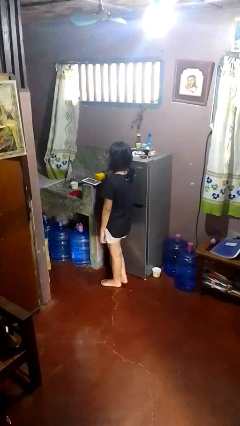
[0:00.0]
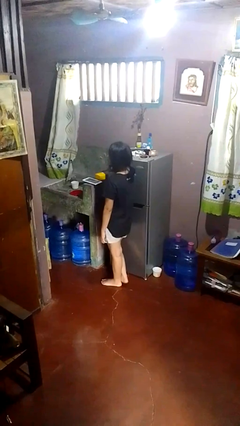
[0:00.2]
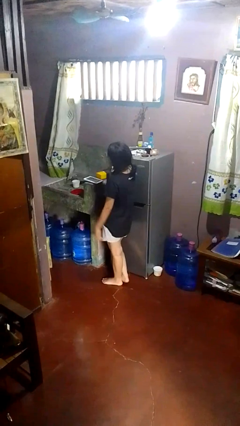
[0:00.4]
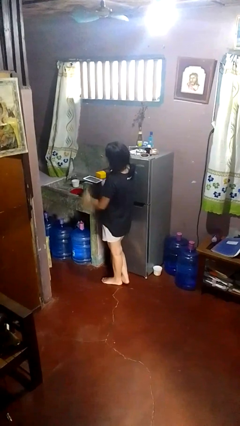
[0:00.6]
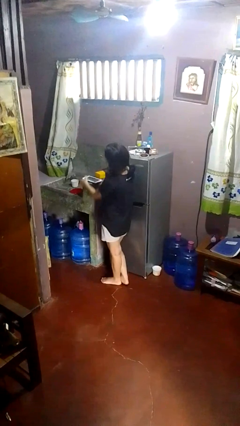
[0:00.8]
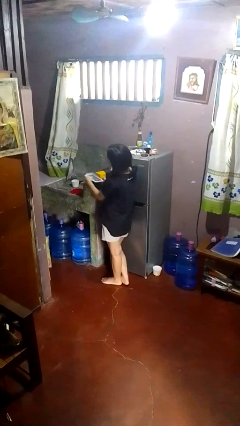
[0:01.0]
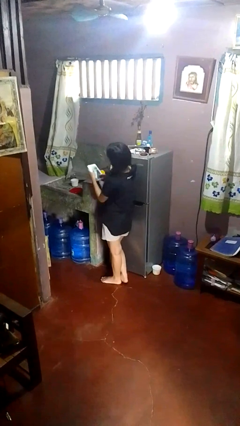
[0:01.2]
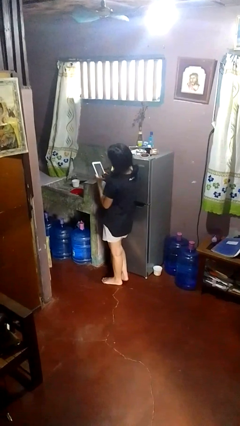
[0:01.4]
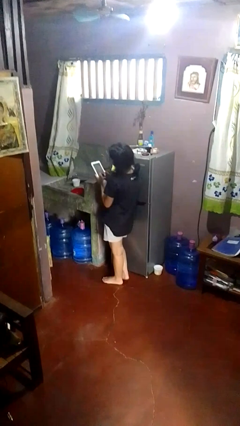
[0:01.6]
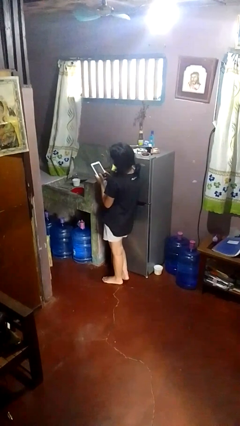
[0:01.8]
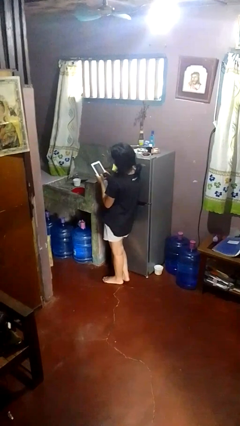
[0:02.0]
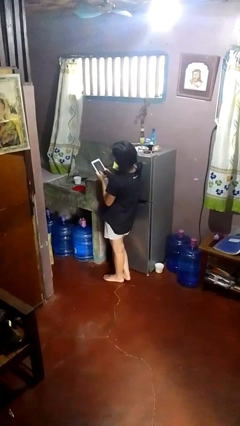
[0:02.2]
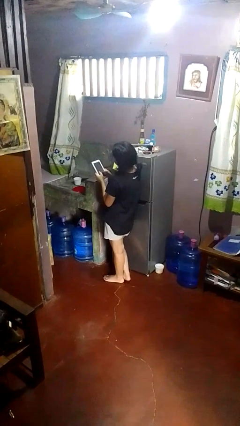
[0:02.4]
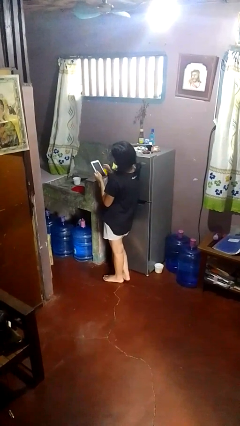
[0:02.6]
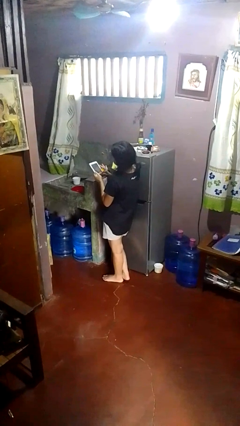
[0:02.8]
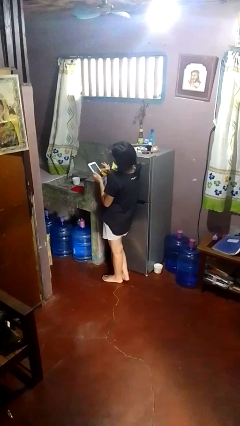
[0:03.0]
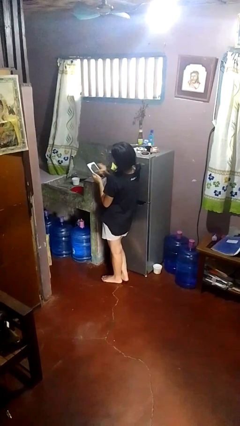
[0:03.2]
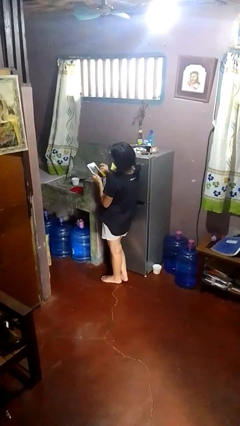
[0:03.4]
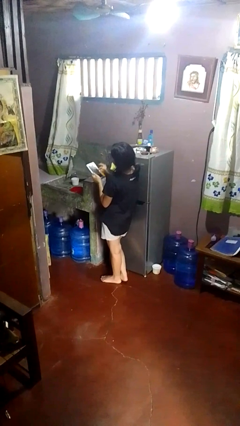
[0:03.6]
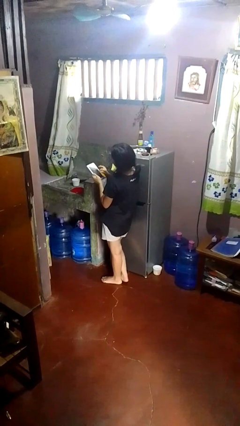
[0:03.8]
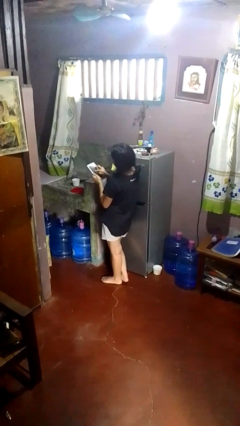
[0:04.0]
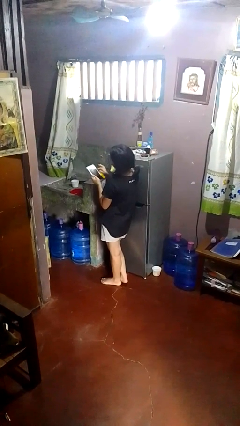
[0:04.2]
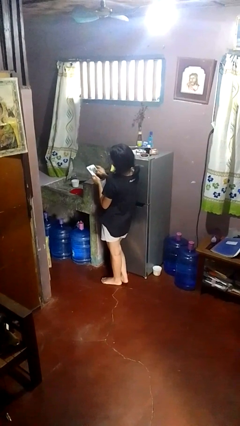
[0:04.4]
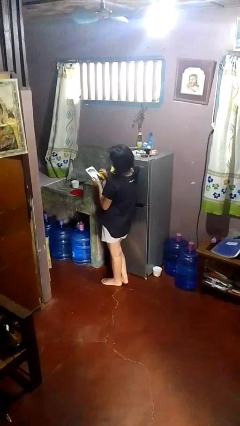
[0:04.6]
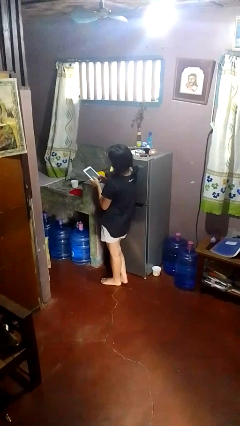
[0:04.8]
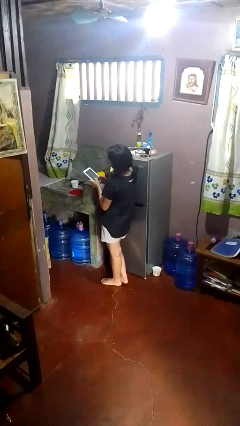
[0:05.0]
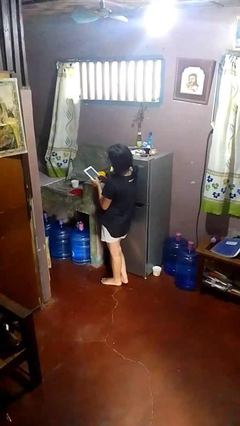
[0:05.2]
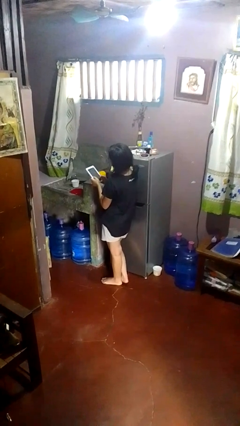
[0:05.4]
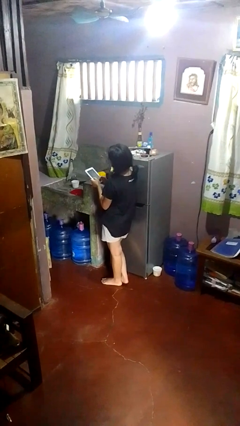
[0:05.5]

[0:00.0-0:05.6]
person interacts with tablet

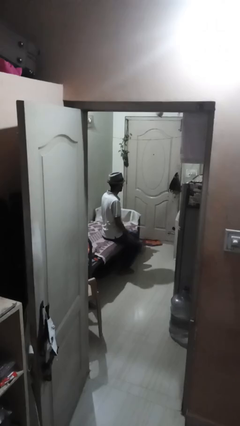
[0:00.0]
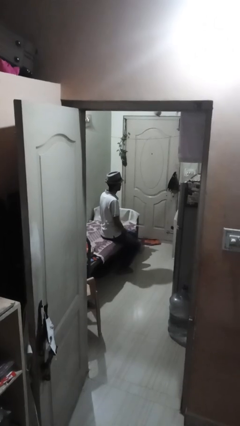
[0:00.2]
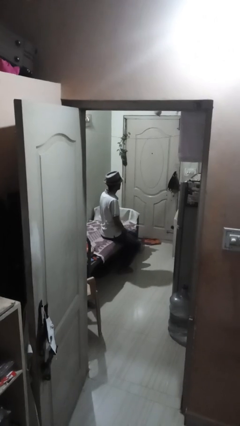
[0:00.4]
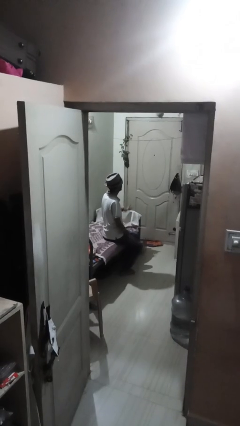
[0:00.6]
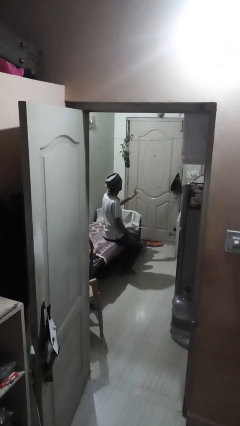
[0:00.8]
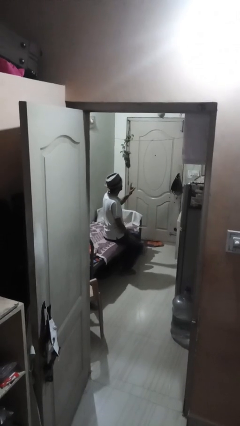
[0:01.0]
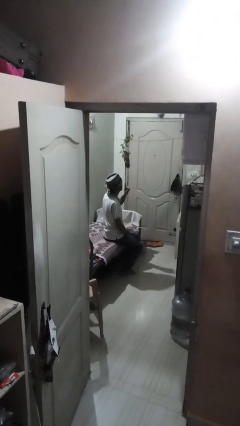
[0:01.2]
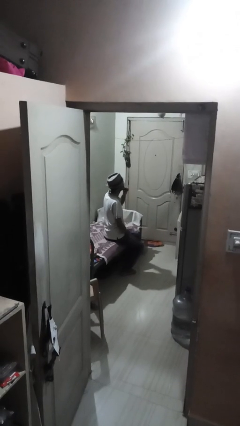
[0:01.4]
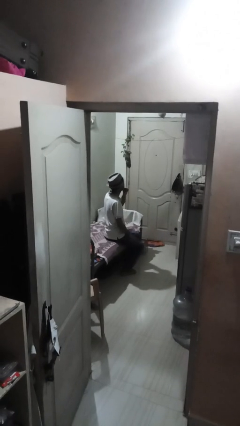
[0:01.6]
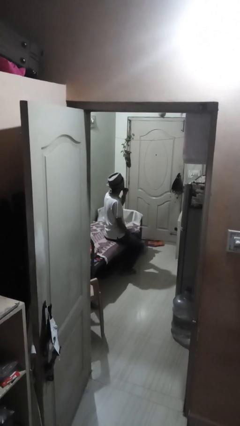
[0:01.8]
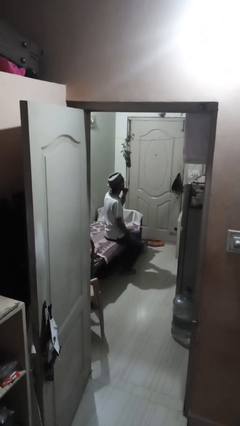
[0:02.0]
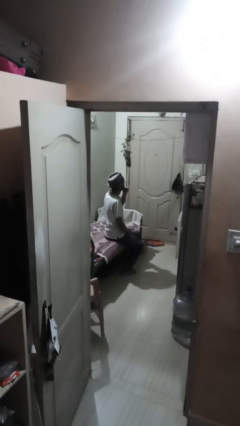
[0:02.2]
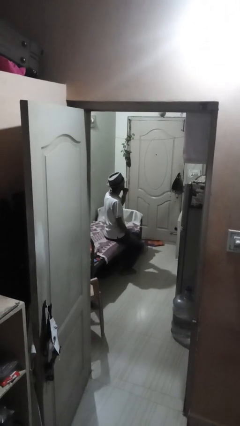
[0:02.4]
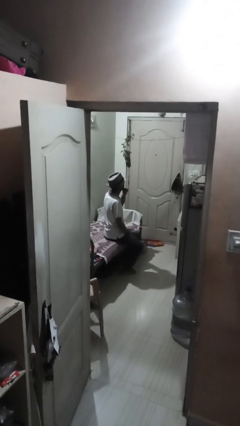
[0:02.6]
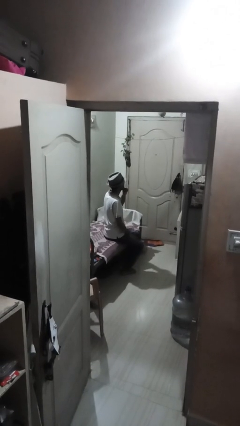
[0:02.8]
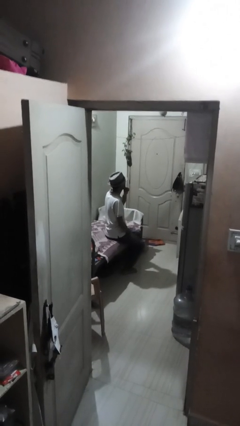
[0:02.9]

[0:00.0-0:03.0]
person gestures be quiet

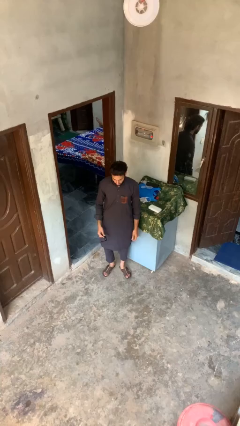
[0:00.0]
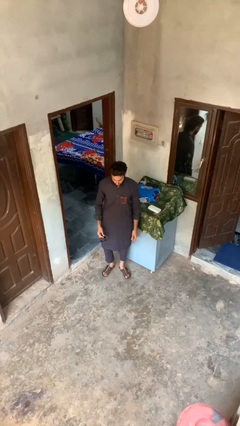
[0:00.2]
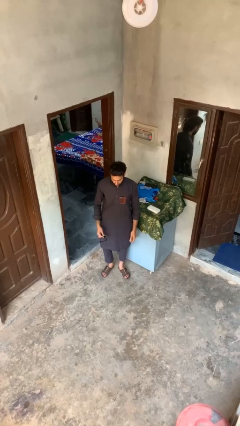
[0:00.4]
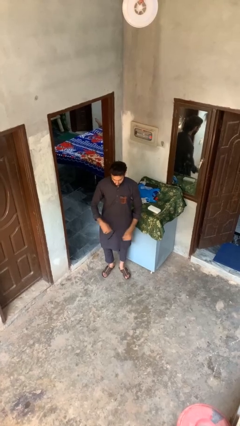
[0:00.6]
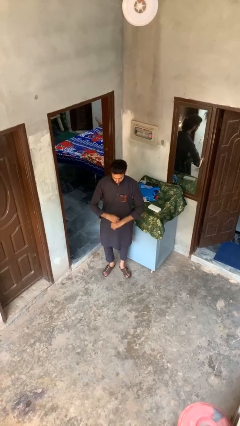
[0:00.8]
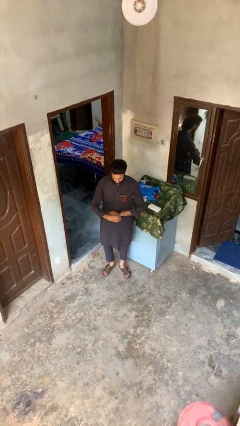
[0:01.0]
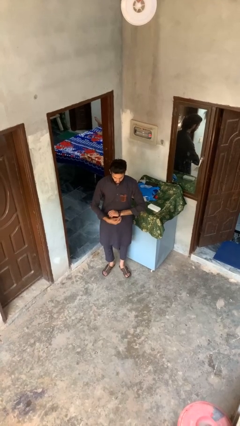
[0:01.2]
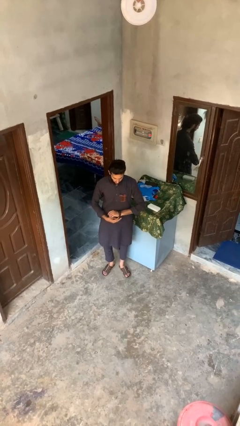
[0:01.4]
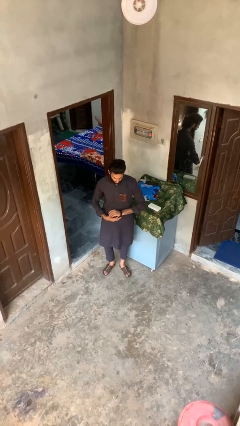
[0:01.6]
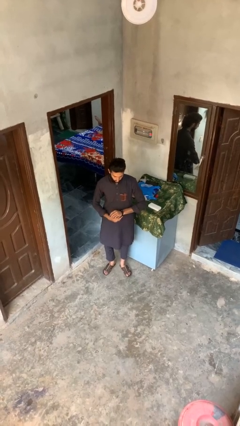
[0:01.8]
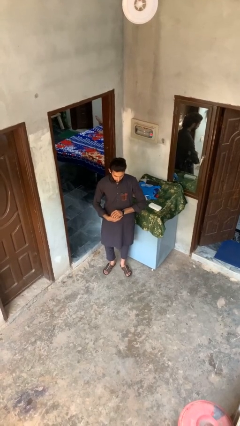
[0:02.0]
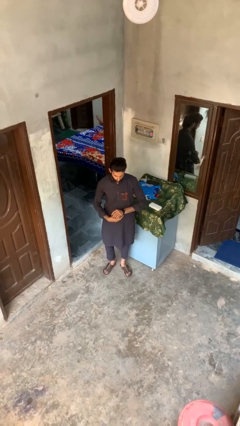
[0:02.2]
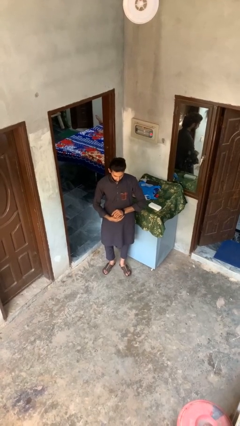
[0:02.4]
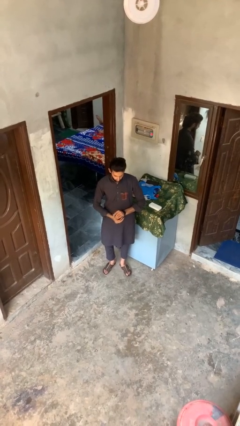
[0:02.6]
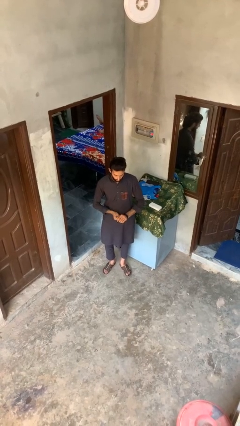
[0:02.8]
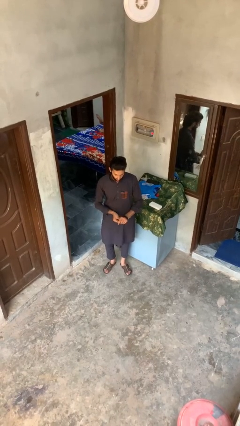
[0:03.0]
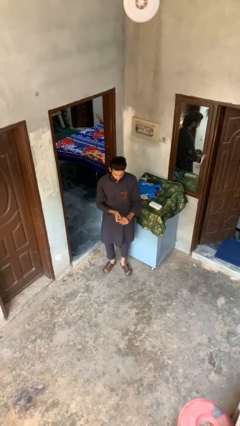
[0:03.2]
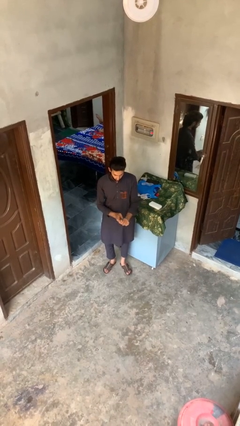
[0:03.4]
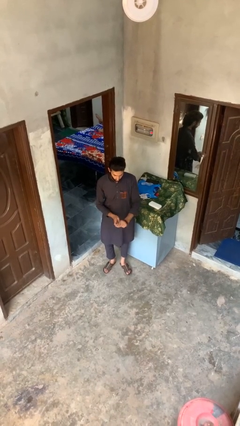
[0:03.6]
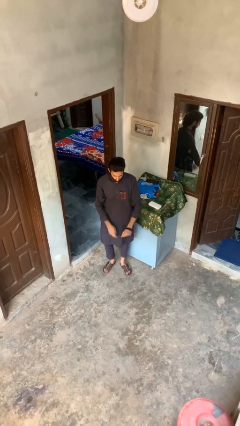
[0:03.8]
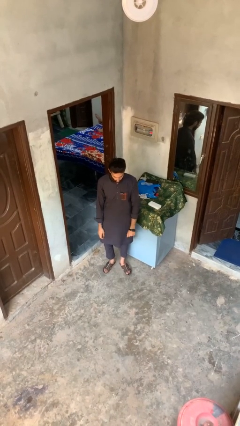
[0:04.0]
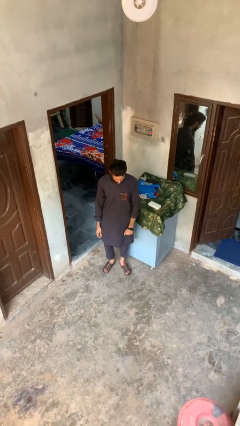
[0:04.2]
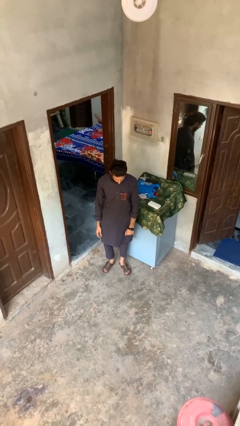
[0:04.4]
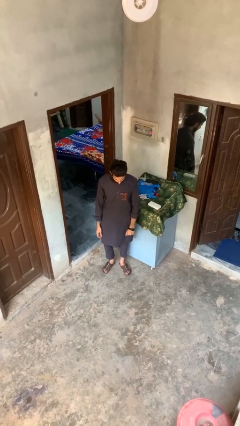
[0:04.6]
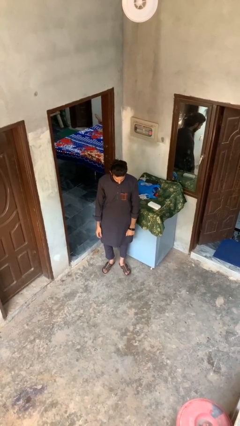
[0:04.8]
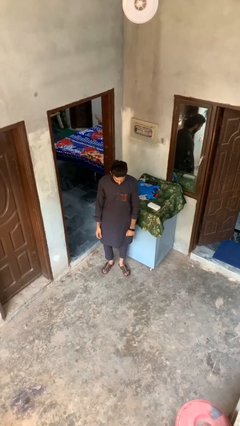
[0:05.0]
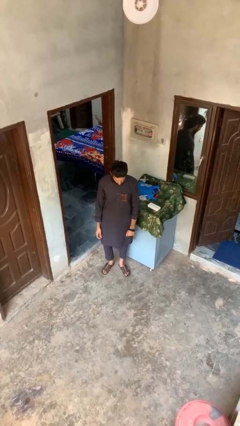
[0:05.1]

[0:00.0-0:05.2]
person puts on wristwatch

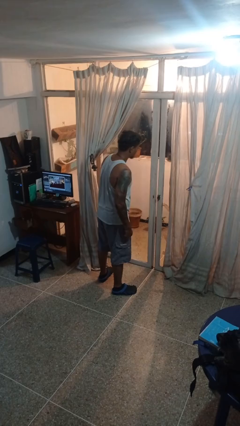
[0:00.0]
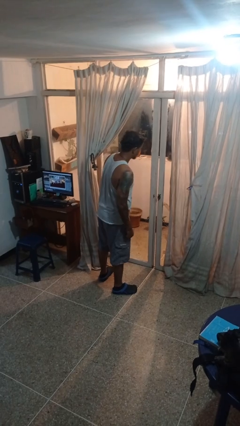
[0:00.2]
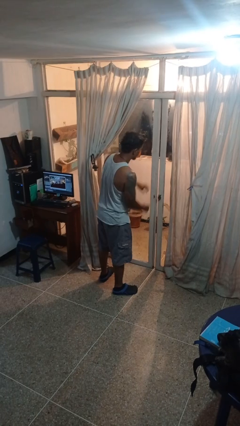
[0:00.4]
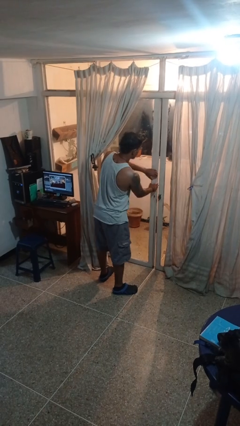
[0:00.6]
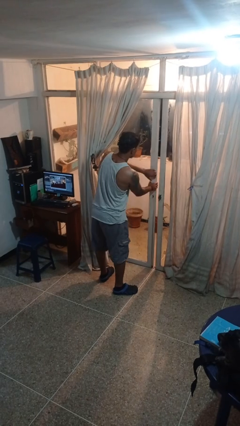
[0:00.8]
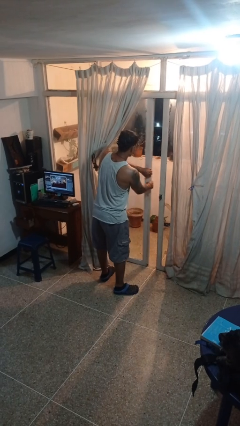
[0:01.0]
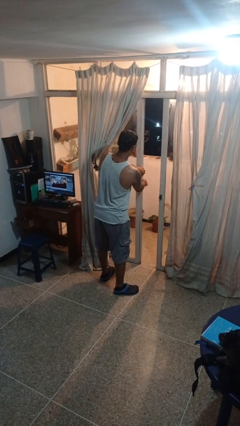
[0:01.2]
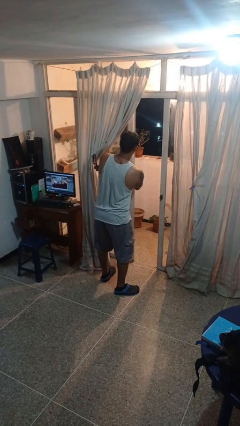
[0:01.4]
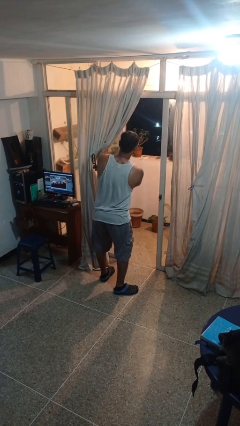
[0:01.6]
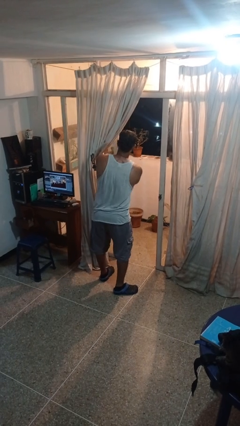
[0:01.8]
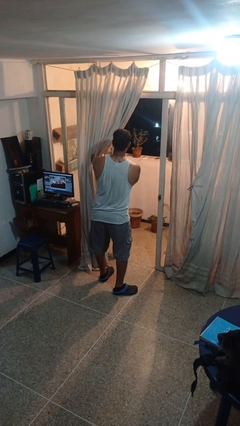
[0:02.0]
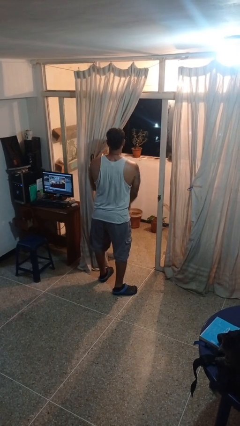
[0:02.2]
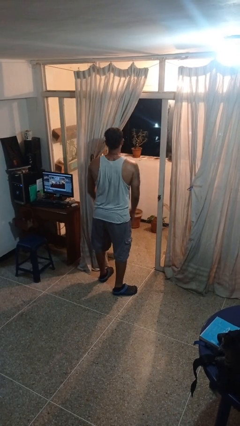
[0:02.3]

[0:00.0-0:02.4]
person opens sliding door

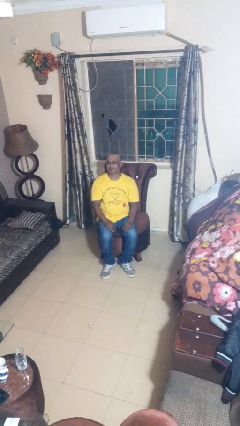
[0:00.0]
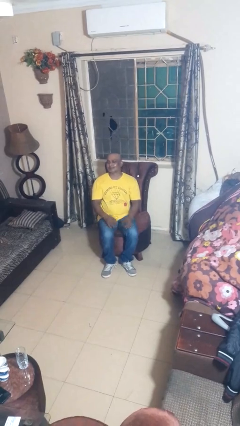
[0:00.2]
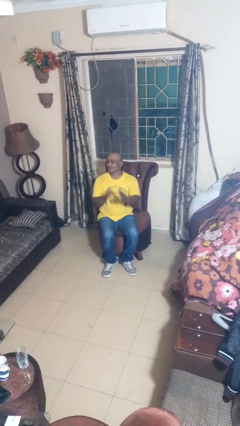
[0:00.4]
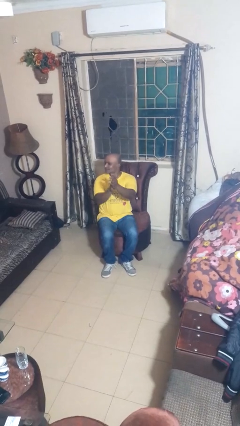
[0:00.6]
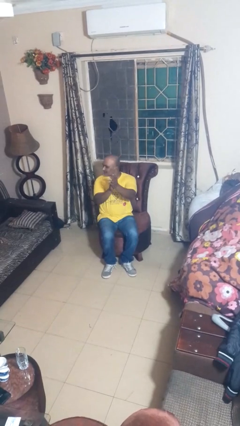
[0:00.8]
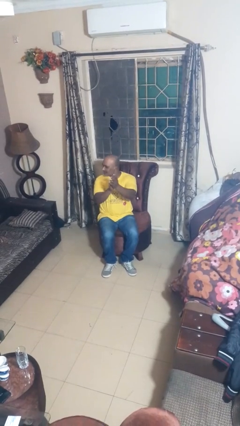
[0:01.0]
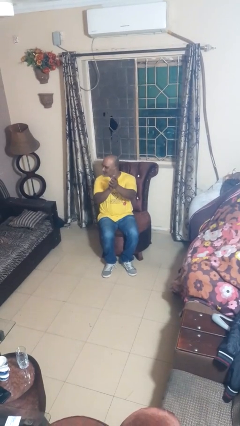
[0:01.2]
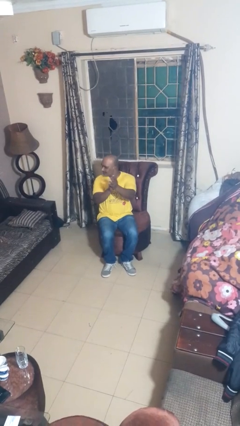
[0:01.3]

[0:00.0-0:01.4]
person claps hands

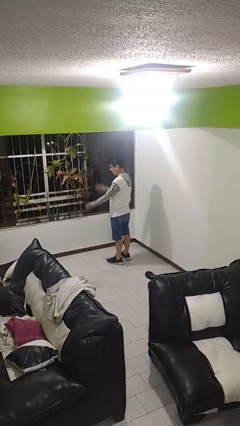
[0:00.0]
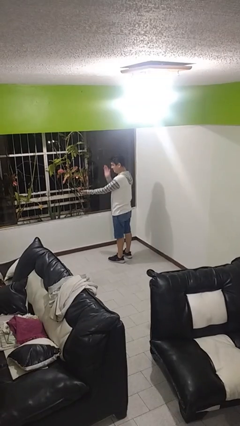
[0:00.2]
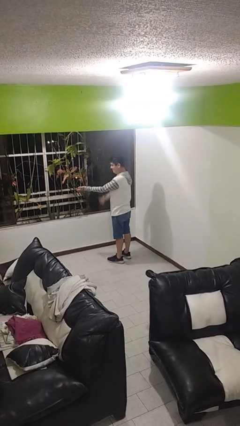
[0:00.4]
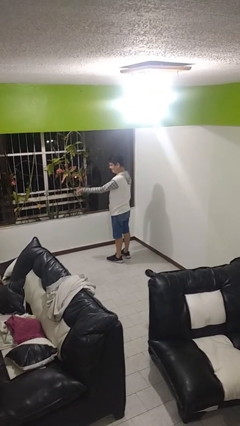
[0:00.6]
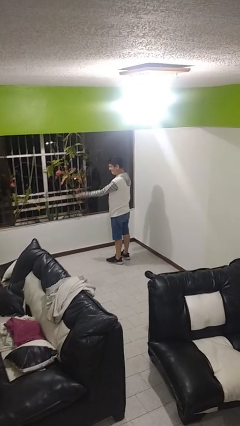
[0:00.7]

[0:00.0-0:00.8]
person swats bug
